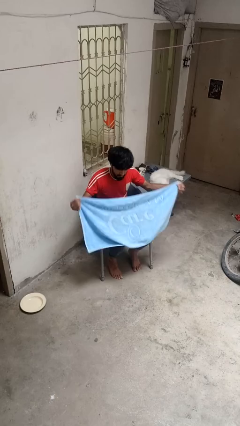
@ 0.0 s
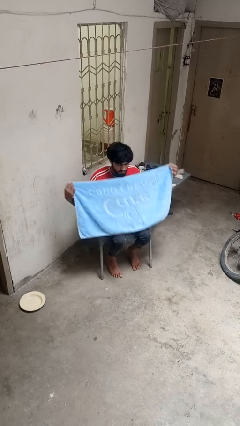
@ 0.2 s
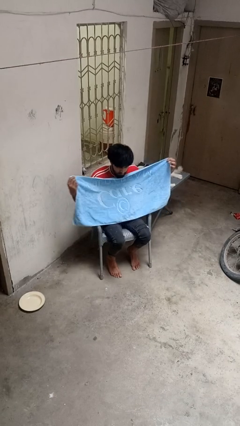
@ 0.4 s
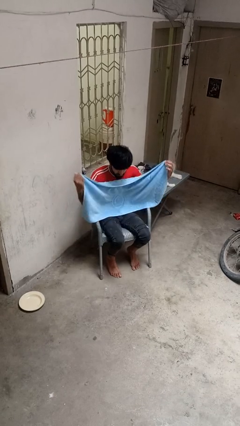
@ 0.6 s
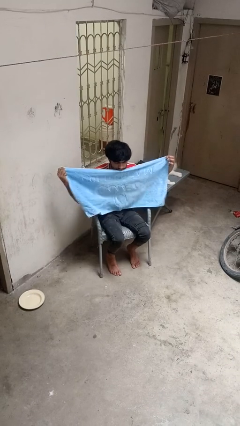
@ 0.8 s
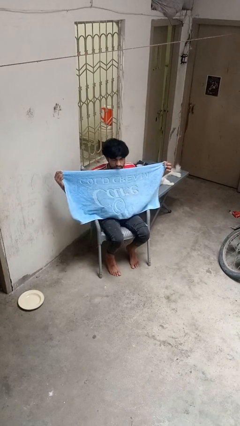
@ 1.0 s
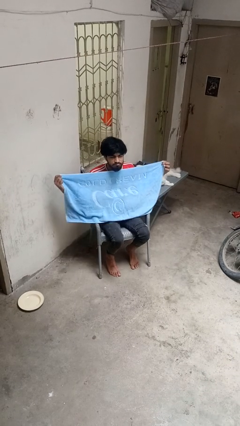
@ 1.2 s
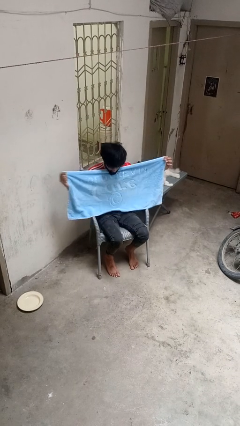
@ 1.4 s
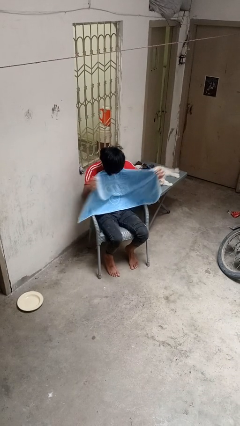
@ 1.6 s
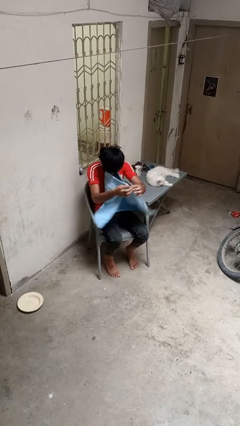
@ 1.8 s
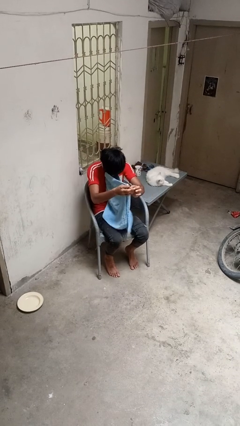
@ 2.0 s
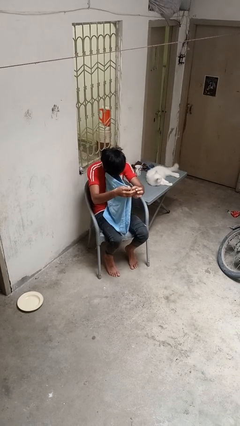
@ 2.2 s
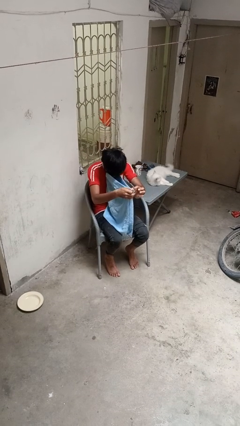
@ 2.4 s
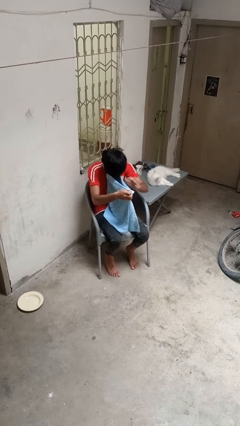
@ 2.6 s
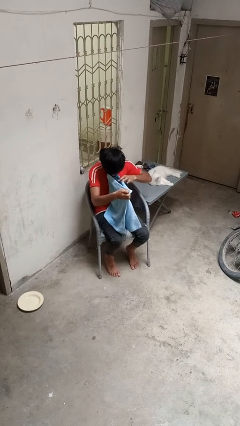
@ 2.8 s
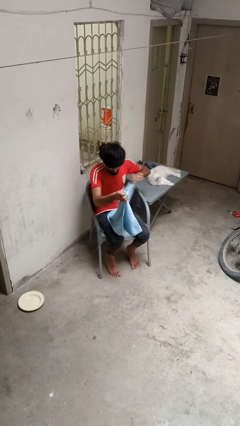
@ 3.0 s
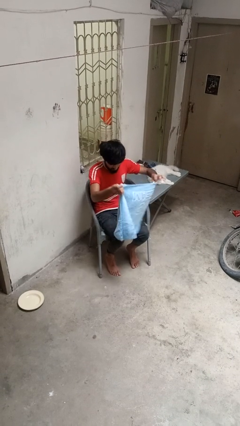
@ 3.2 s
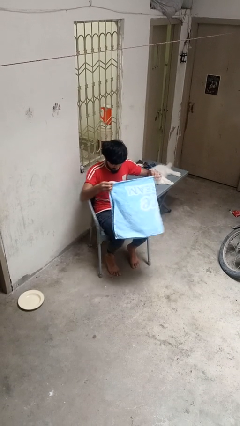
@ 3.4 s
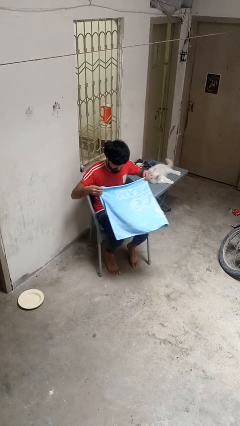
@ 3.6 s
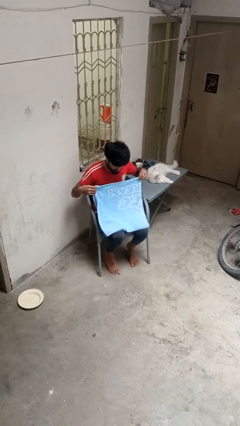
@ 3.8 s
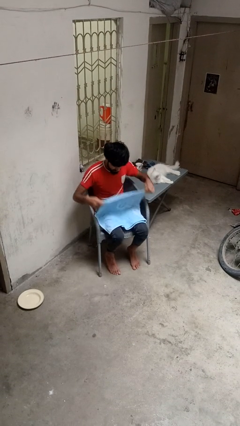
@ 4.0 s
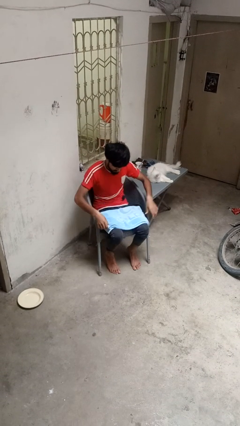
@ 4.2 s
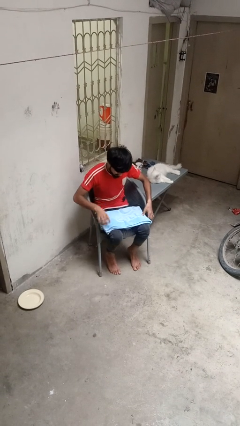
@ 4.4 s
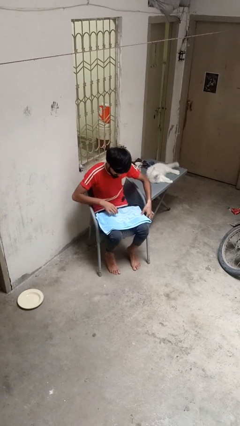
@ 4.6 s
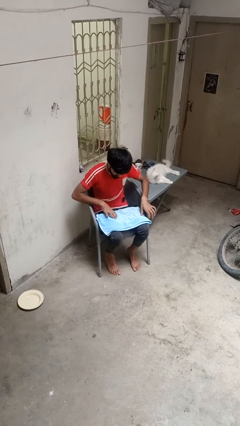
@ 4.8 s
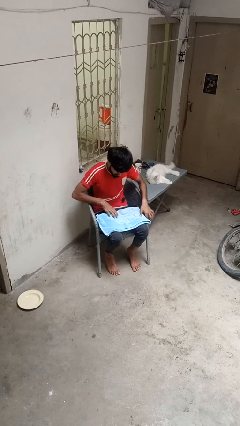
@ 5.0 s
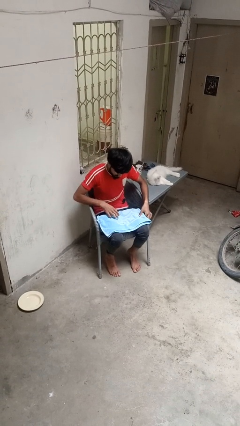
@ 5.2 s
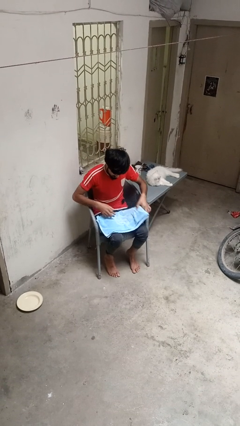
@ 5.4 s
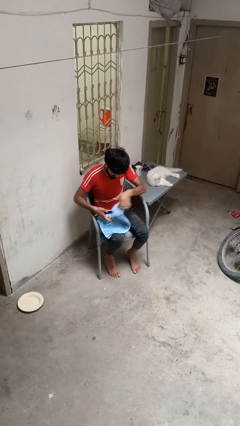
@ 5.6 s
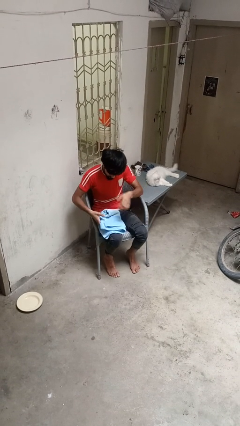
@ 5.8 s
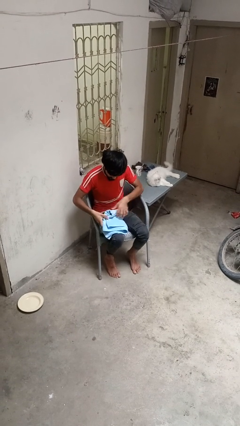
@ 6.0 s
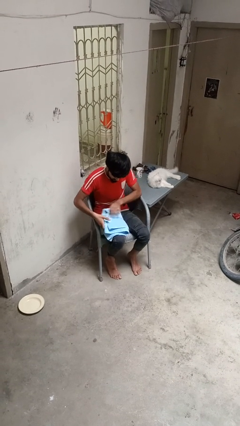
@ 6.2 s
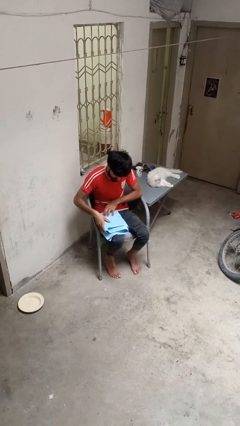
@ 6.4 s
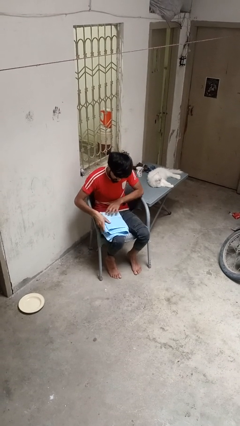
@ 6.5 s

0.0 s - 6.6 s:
person folds towel

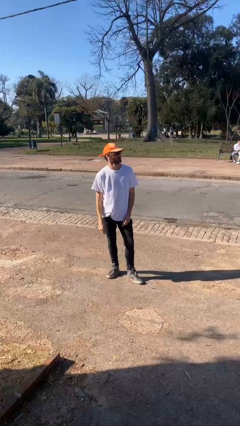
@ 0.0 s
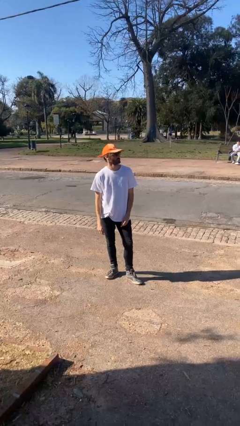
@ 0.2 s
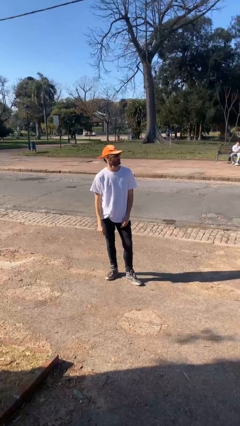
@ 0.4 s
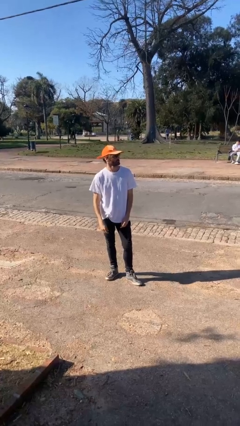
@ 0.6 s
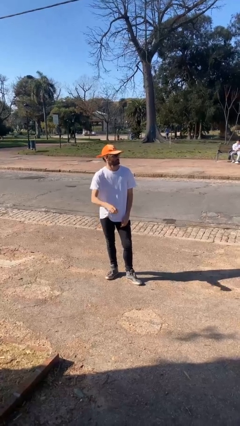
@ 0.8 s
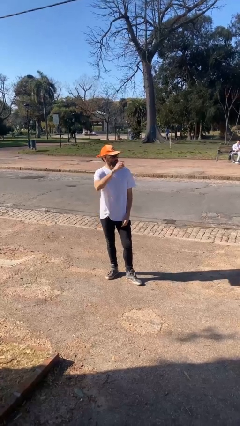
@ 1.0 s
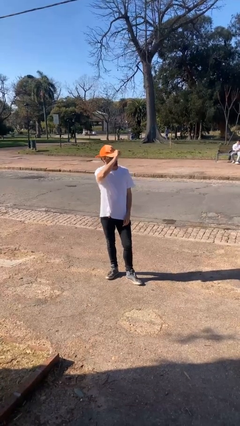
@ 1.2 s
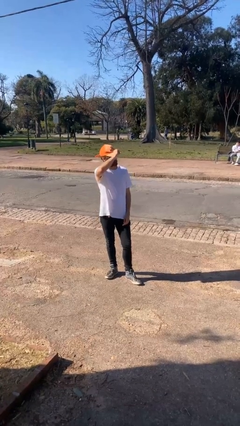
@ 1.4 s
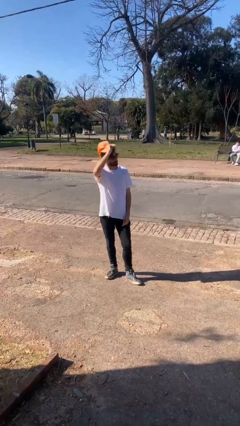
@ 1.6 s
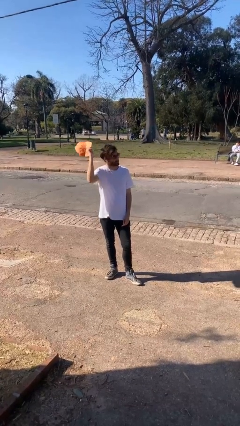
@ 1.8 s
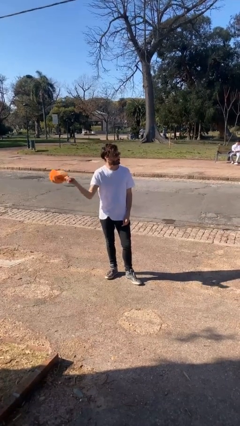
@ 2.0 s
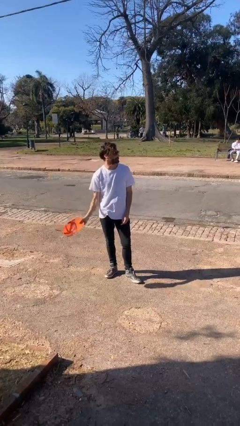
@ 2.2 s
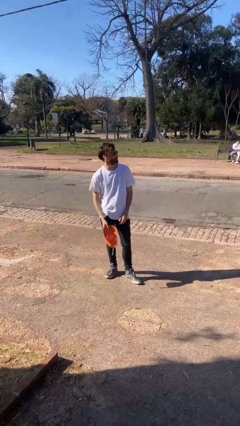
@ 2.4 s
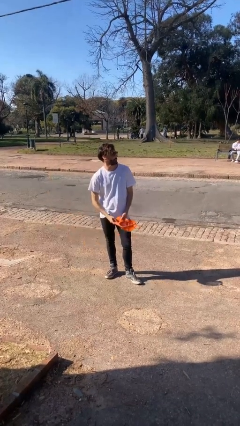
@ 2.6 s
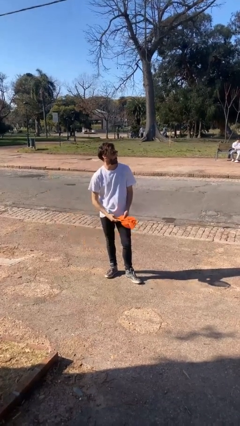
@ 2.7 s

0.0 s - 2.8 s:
person takes off hat

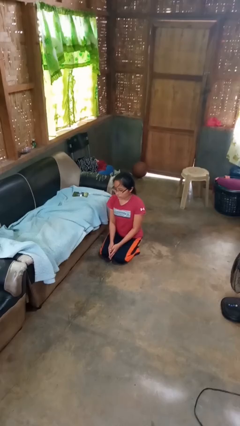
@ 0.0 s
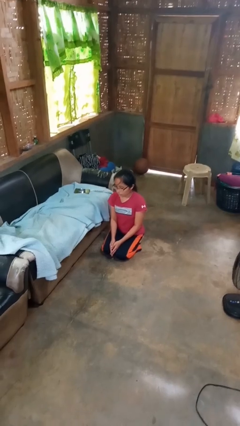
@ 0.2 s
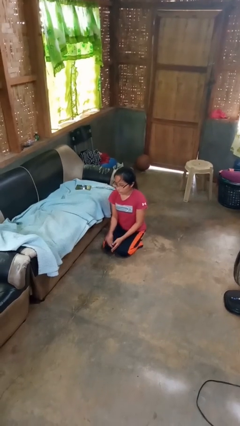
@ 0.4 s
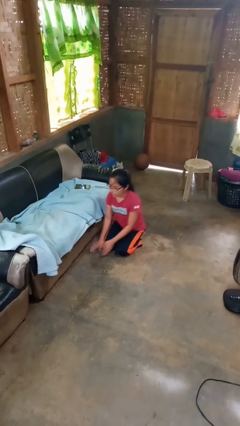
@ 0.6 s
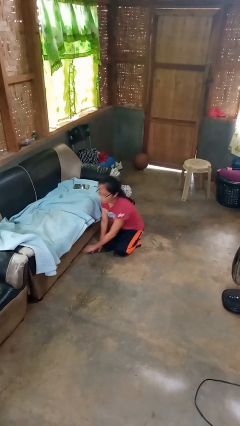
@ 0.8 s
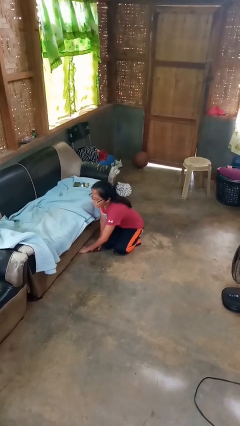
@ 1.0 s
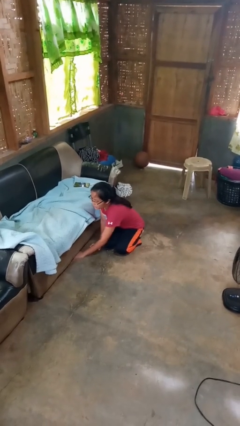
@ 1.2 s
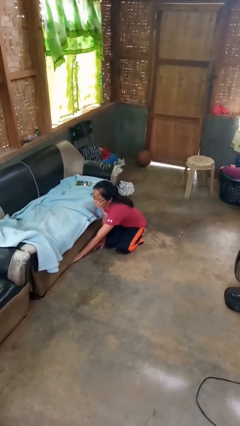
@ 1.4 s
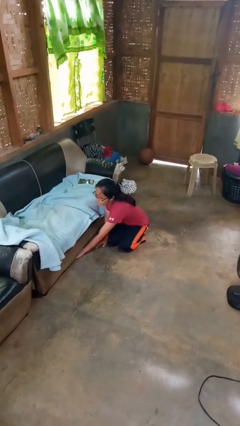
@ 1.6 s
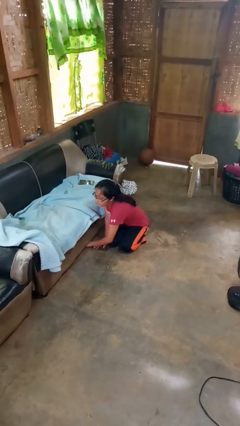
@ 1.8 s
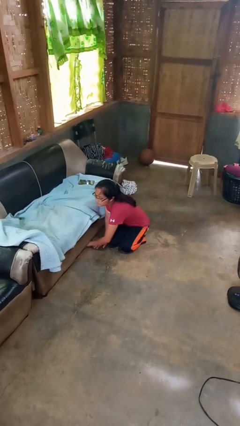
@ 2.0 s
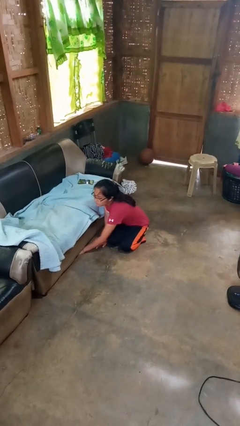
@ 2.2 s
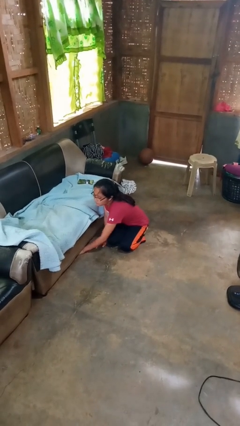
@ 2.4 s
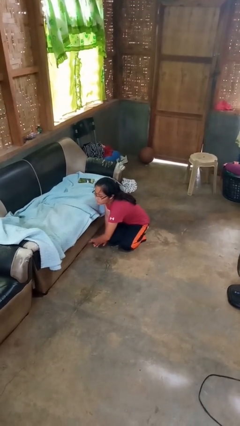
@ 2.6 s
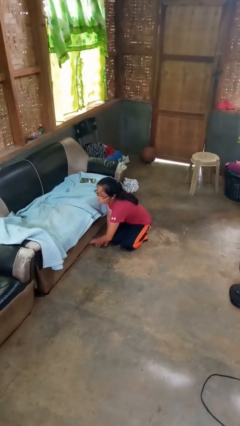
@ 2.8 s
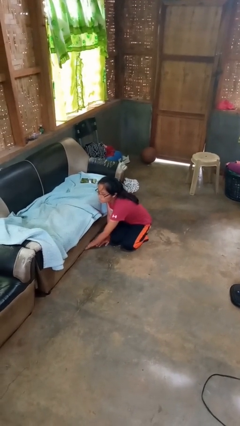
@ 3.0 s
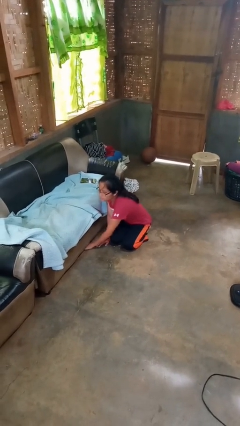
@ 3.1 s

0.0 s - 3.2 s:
person searches under couch

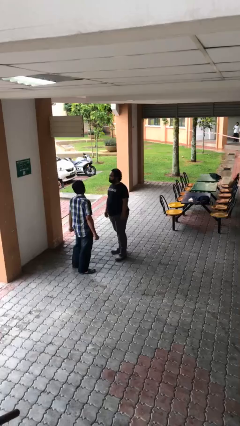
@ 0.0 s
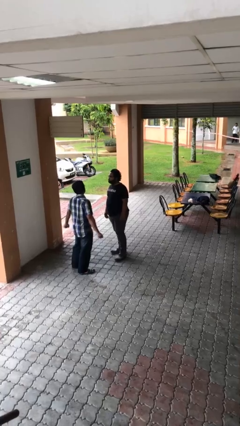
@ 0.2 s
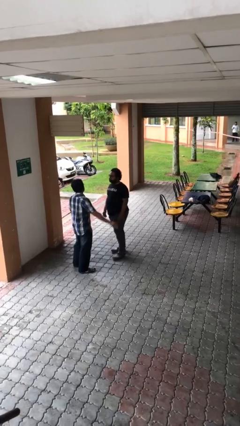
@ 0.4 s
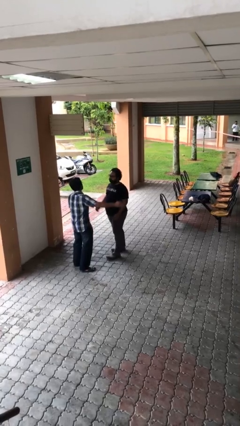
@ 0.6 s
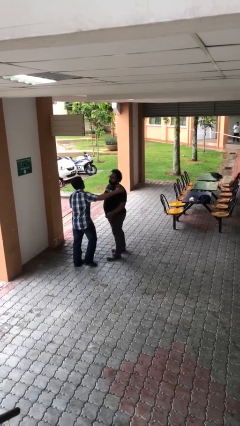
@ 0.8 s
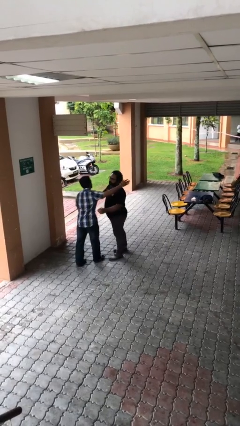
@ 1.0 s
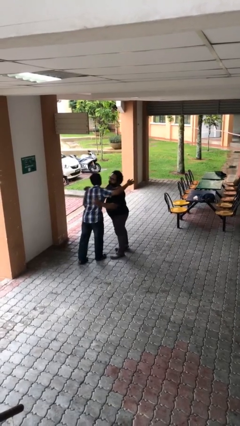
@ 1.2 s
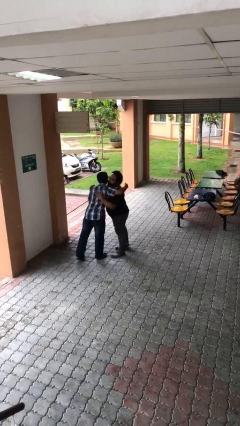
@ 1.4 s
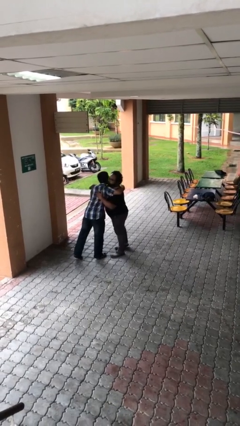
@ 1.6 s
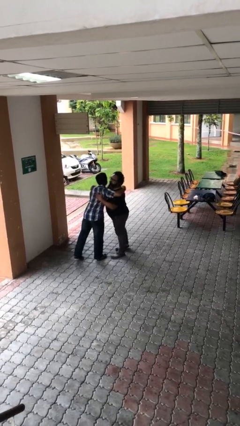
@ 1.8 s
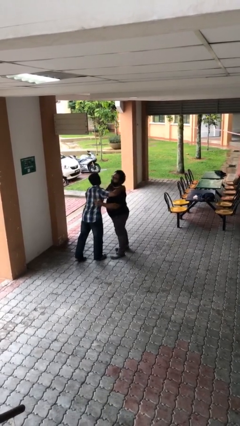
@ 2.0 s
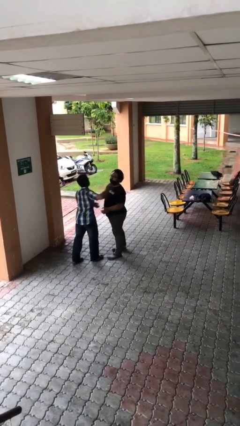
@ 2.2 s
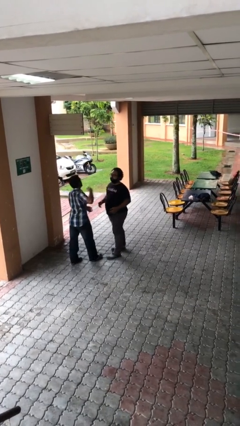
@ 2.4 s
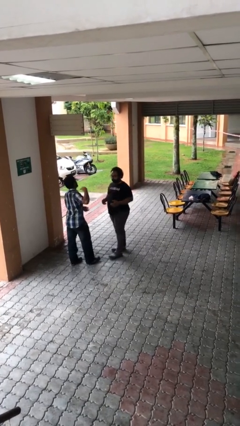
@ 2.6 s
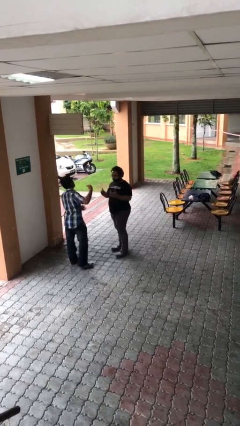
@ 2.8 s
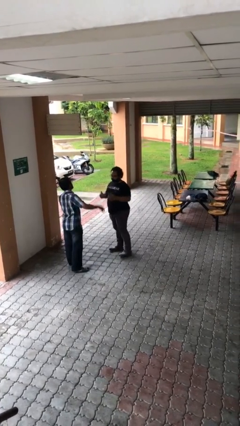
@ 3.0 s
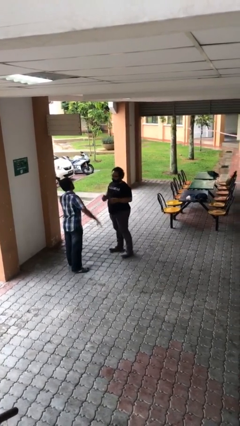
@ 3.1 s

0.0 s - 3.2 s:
person embraces person

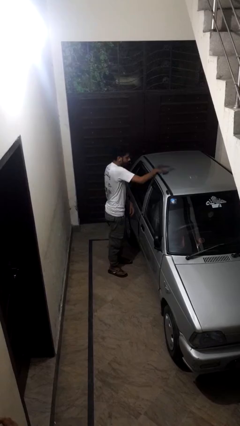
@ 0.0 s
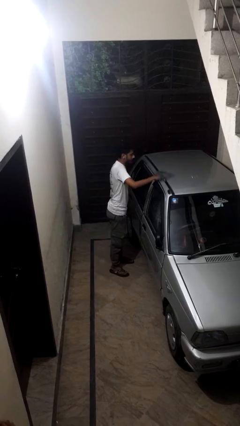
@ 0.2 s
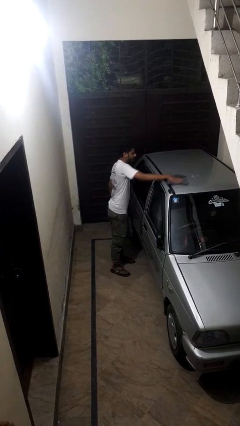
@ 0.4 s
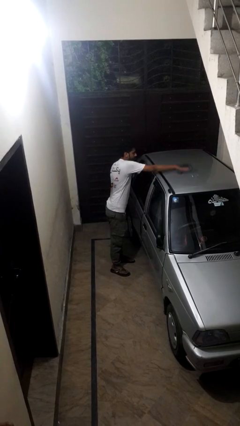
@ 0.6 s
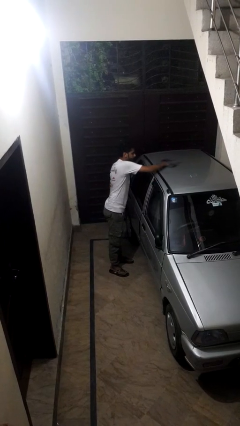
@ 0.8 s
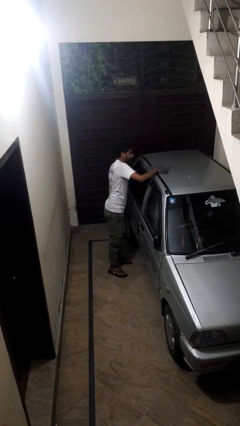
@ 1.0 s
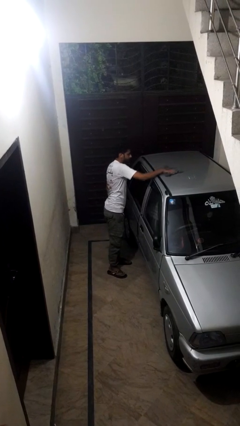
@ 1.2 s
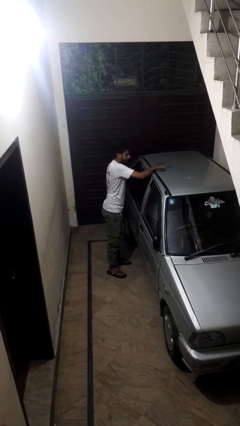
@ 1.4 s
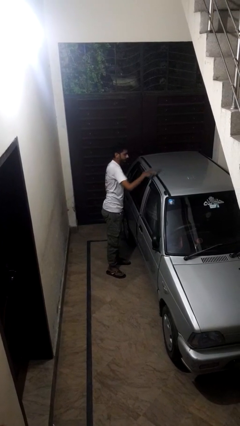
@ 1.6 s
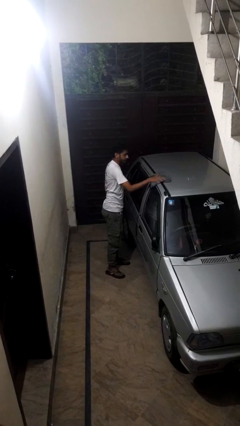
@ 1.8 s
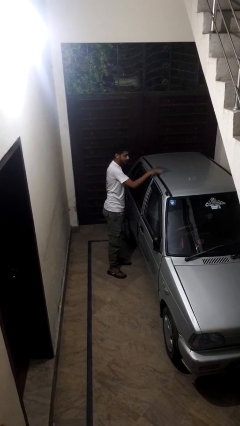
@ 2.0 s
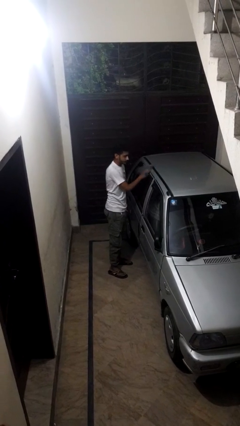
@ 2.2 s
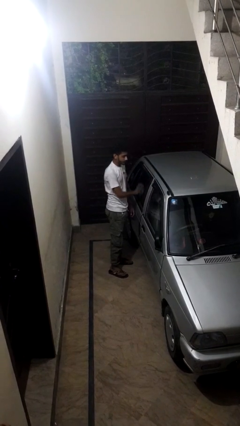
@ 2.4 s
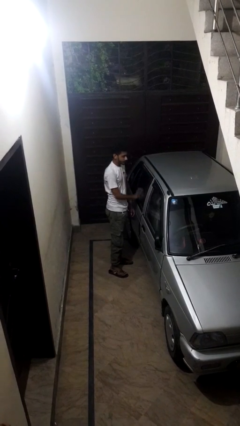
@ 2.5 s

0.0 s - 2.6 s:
person polishes car with rag
